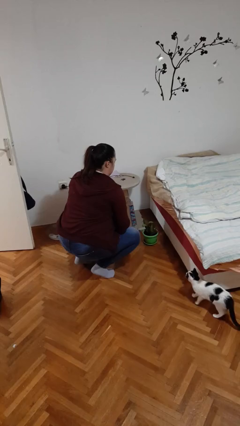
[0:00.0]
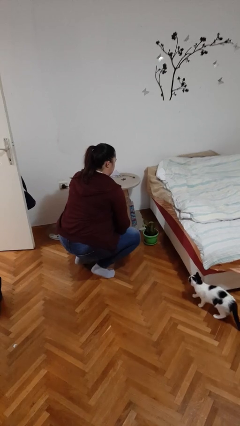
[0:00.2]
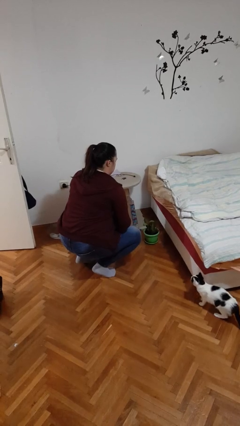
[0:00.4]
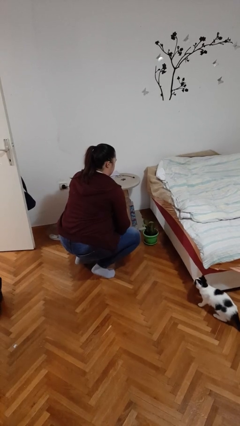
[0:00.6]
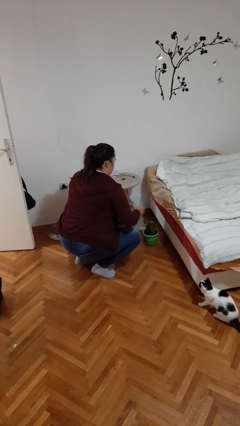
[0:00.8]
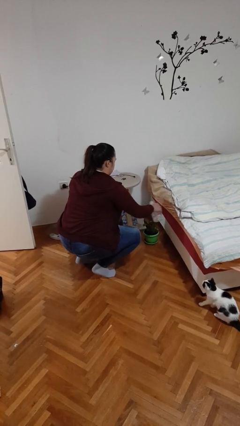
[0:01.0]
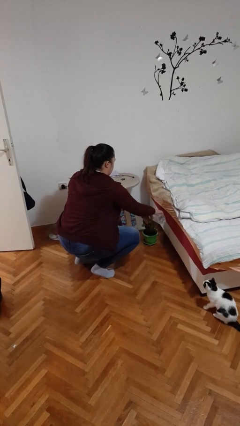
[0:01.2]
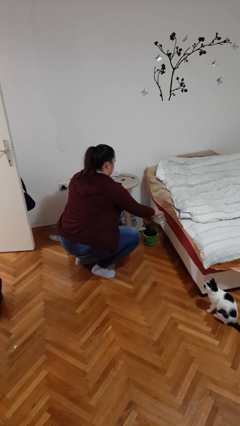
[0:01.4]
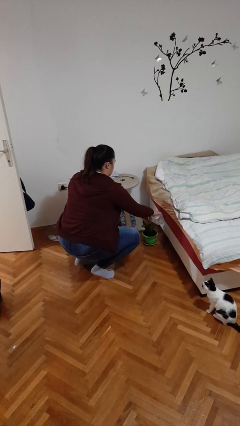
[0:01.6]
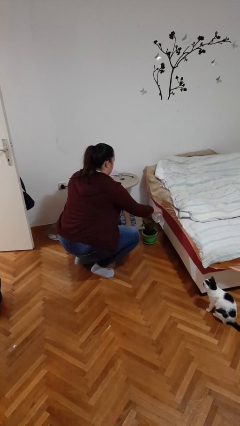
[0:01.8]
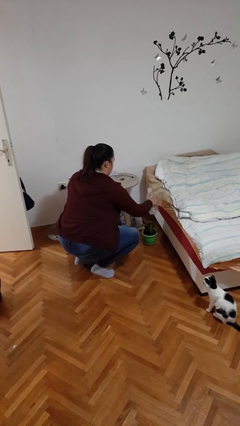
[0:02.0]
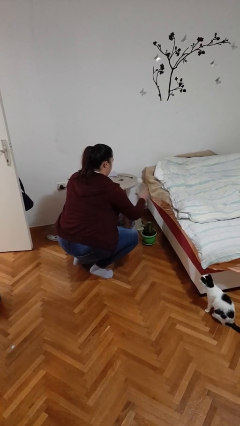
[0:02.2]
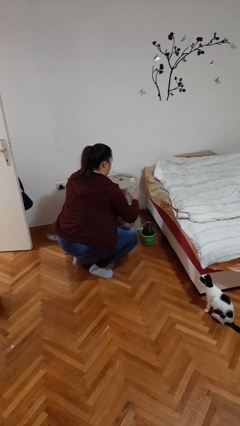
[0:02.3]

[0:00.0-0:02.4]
person waters houseplant

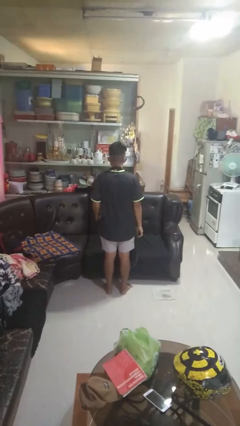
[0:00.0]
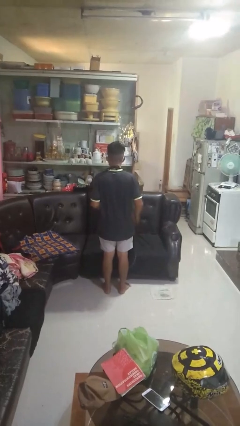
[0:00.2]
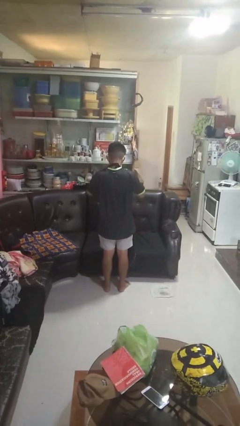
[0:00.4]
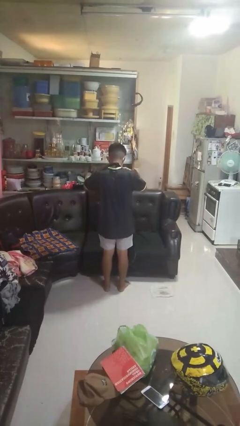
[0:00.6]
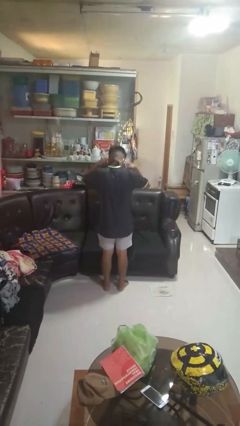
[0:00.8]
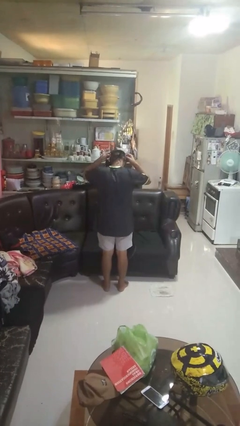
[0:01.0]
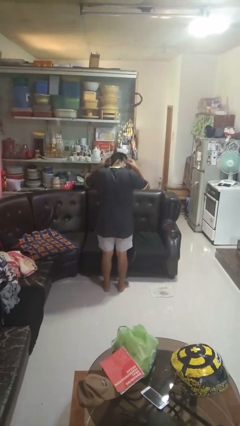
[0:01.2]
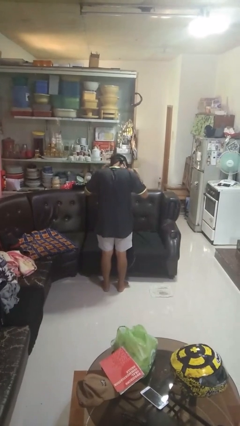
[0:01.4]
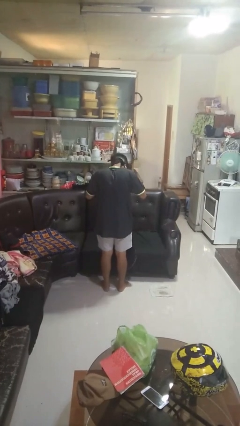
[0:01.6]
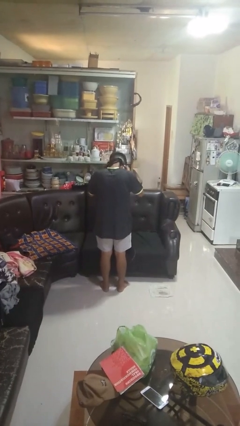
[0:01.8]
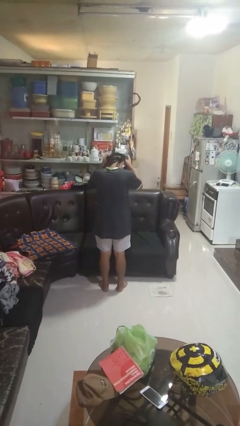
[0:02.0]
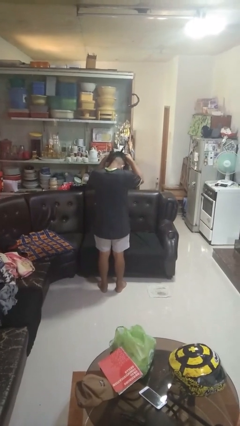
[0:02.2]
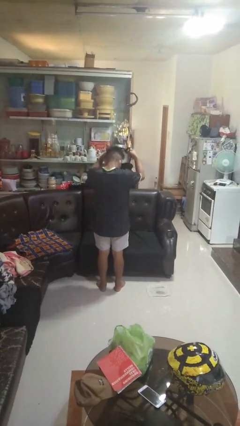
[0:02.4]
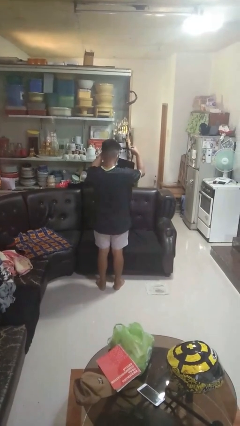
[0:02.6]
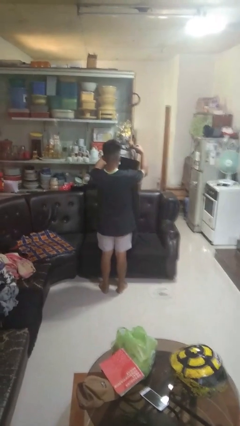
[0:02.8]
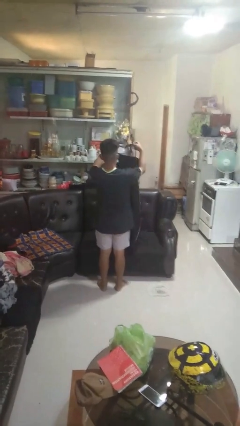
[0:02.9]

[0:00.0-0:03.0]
person takes off apron

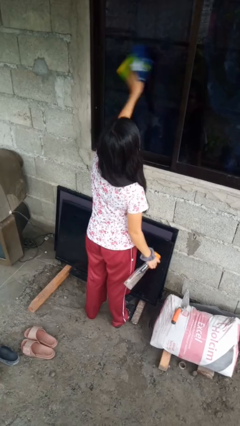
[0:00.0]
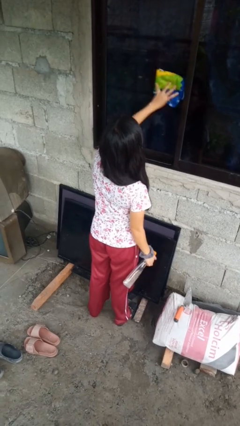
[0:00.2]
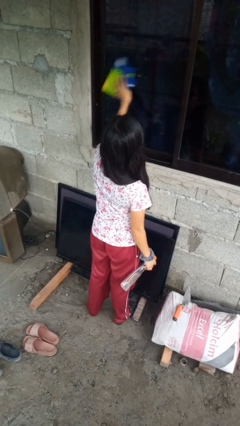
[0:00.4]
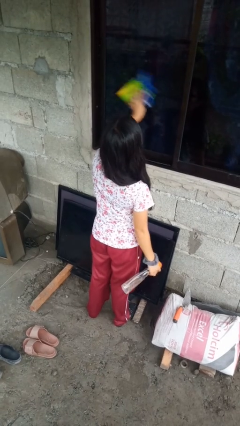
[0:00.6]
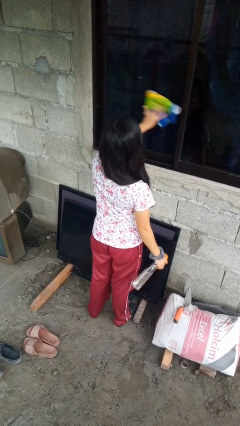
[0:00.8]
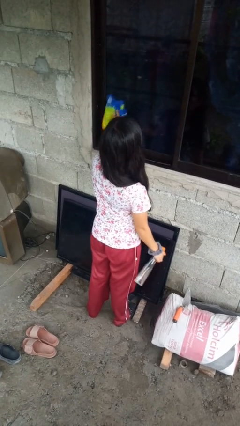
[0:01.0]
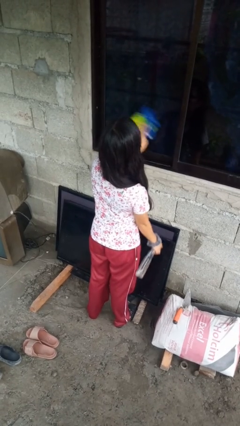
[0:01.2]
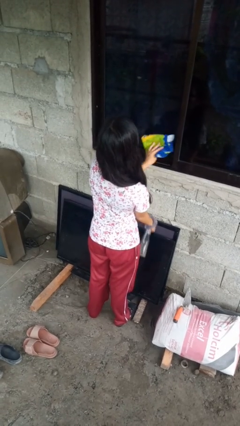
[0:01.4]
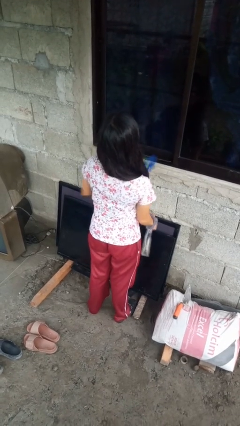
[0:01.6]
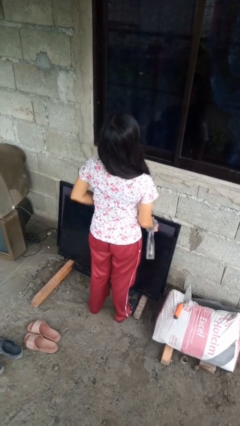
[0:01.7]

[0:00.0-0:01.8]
person washes window

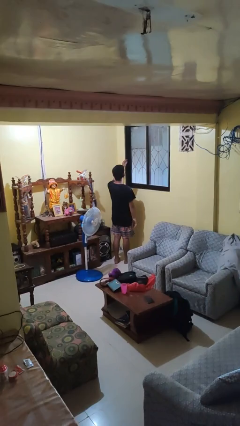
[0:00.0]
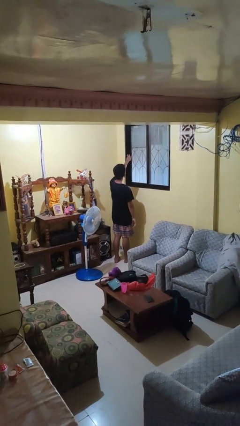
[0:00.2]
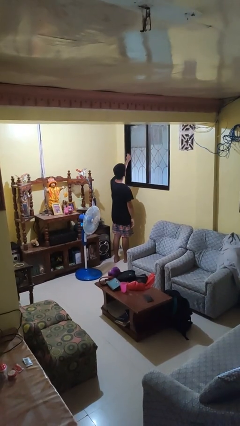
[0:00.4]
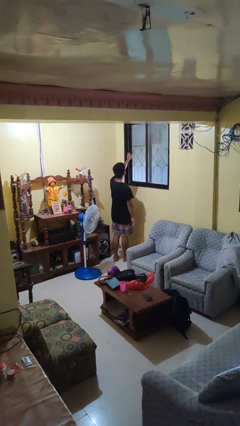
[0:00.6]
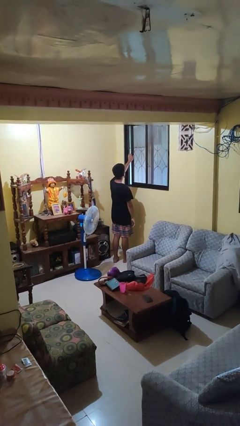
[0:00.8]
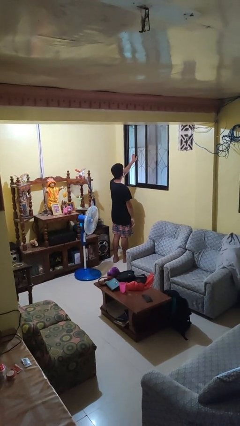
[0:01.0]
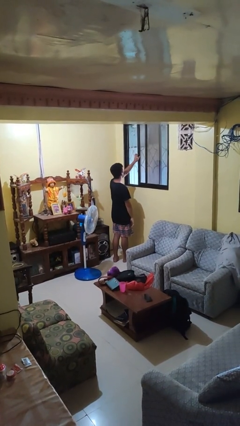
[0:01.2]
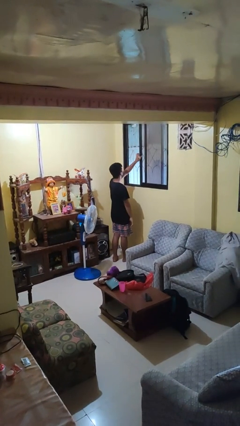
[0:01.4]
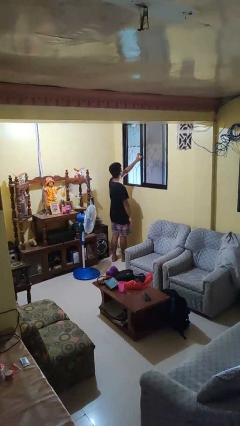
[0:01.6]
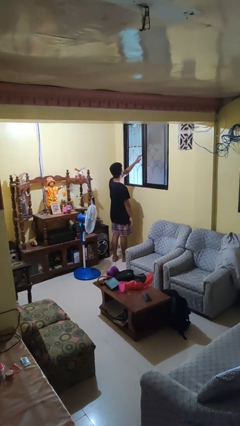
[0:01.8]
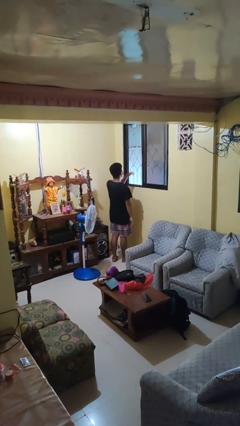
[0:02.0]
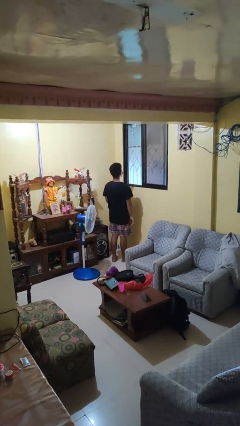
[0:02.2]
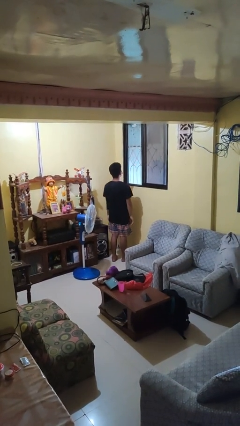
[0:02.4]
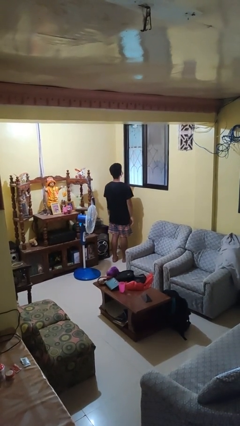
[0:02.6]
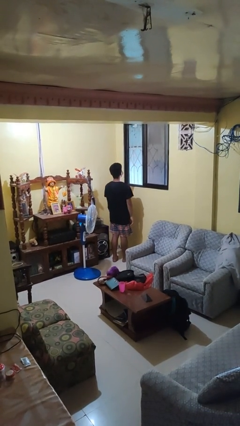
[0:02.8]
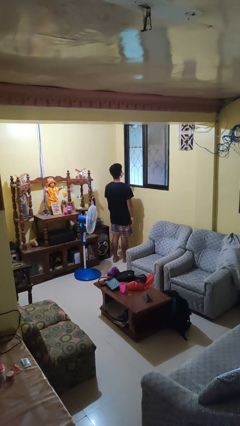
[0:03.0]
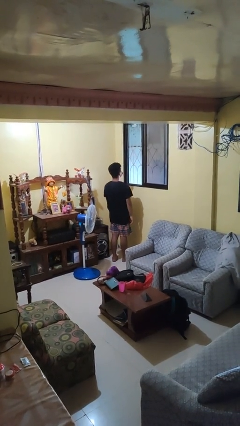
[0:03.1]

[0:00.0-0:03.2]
person opens home window

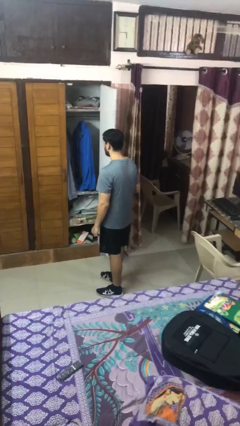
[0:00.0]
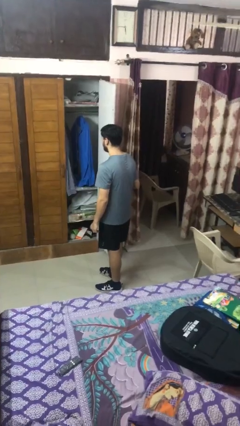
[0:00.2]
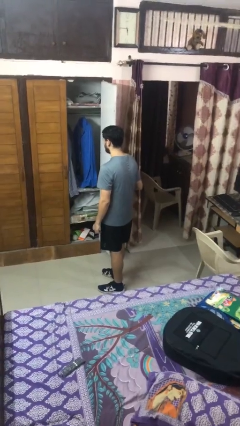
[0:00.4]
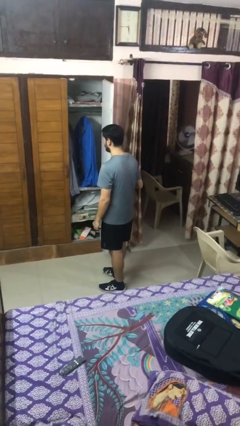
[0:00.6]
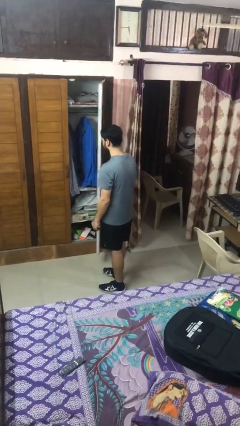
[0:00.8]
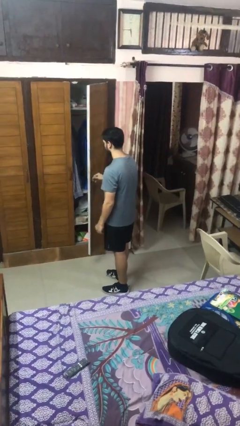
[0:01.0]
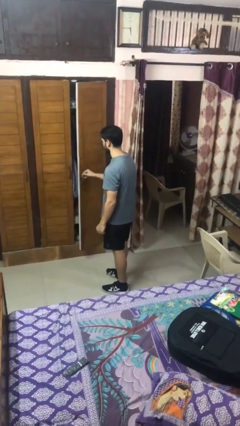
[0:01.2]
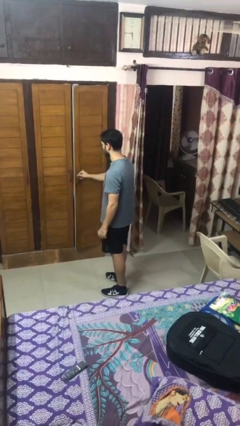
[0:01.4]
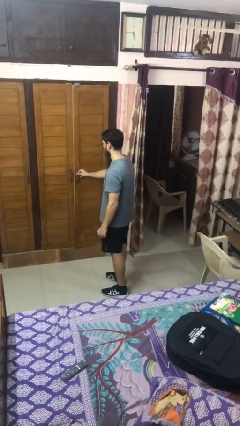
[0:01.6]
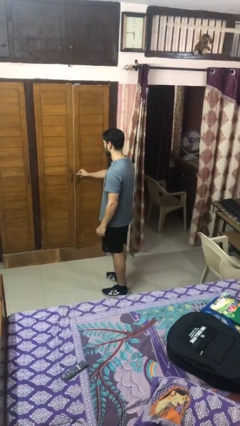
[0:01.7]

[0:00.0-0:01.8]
person closes closet door

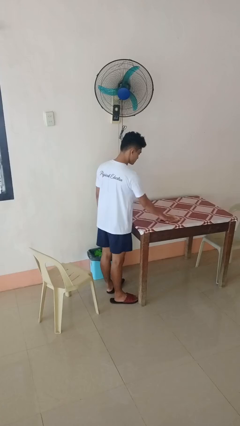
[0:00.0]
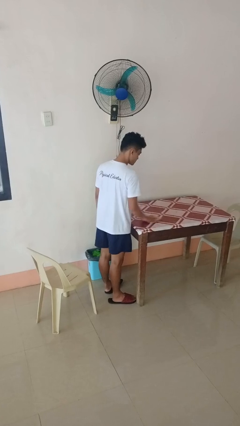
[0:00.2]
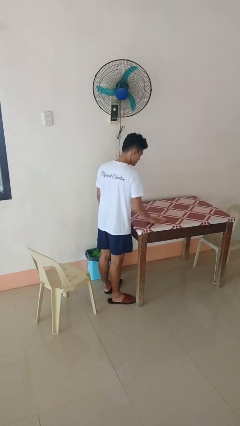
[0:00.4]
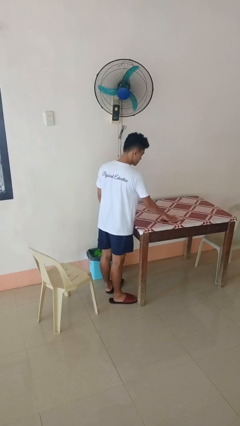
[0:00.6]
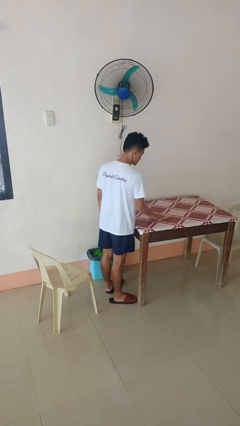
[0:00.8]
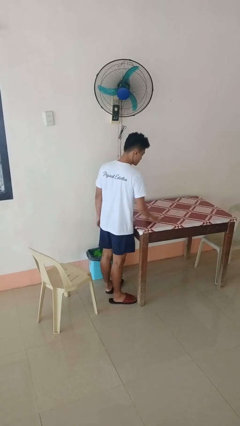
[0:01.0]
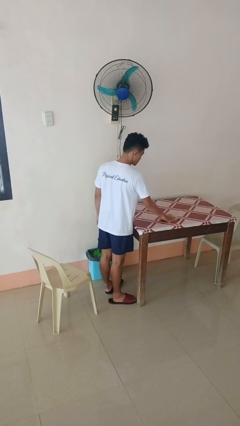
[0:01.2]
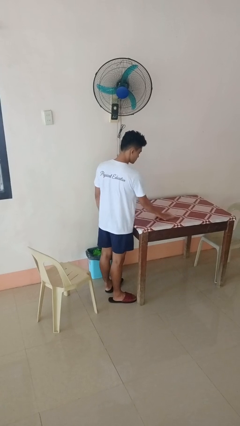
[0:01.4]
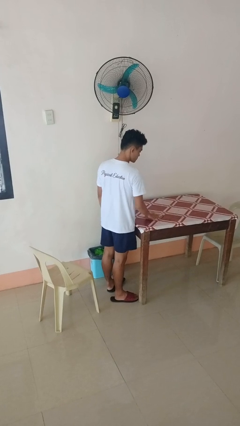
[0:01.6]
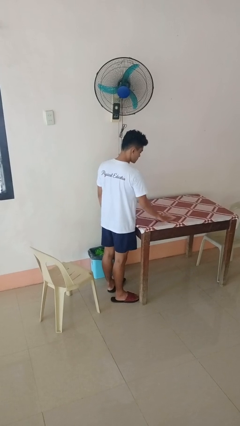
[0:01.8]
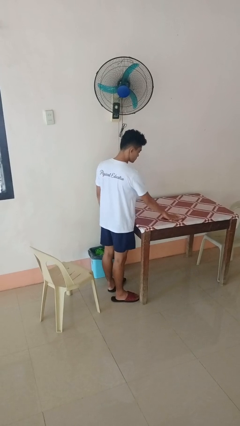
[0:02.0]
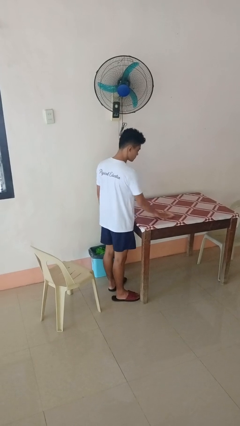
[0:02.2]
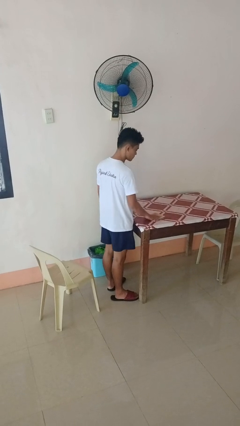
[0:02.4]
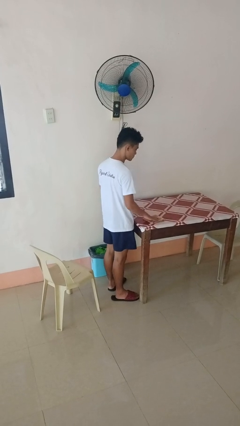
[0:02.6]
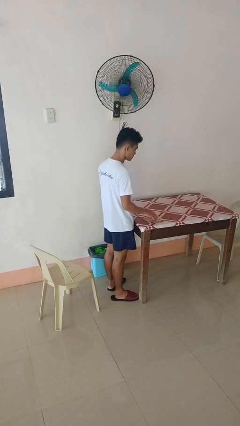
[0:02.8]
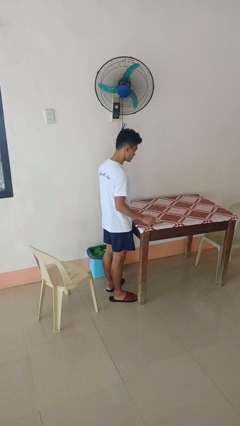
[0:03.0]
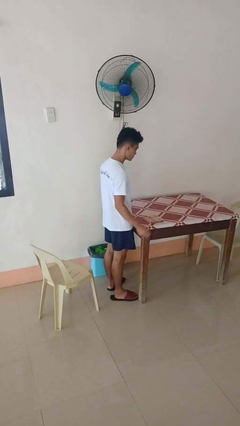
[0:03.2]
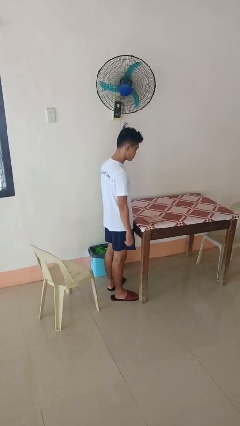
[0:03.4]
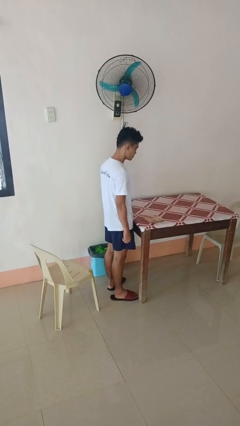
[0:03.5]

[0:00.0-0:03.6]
person cleans table with rag

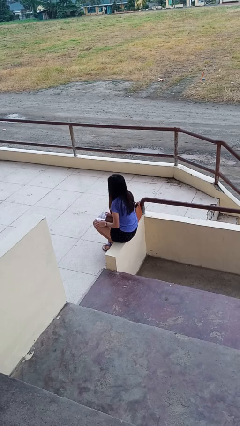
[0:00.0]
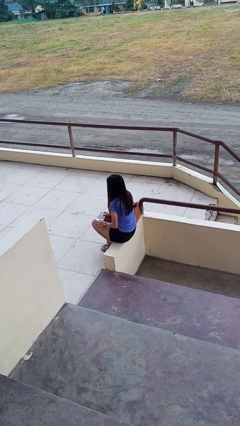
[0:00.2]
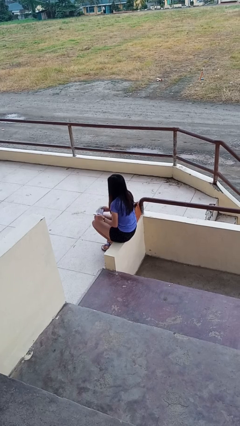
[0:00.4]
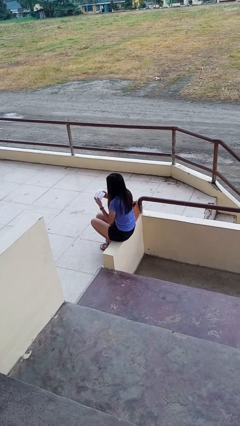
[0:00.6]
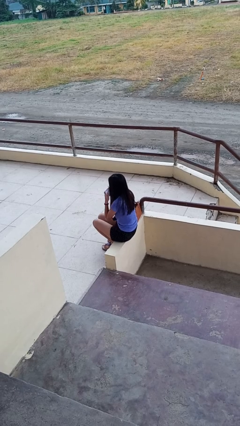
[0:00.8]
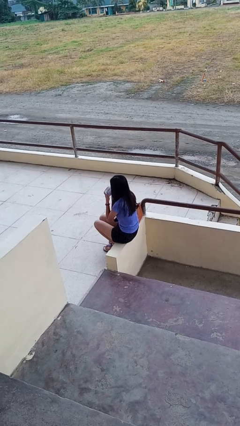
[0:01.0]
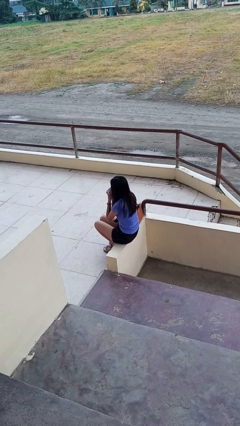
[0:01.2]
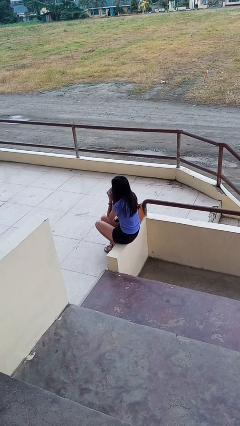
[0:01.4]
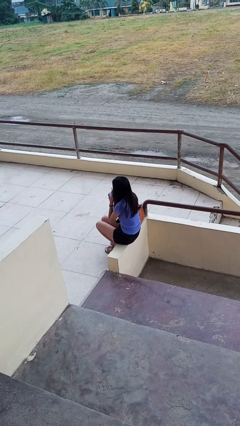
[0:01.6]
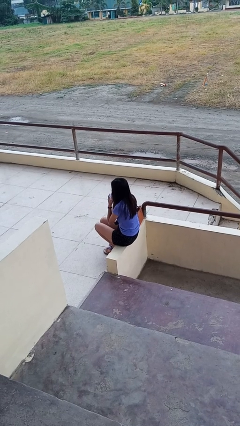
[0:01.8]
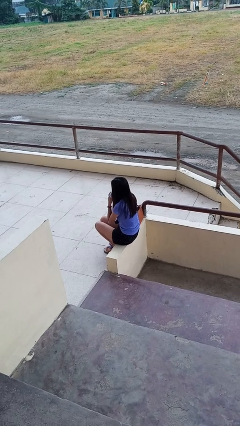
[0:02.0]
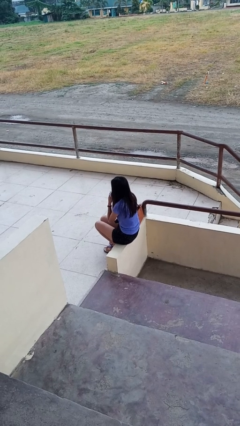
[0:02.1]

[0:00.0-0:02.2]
person wipes mouth with napkin
